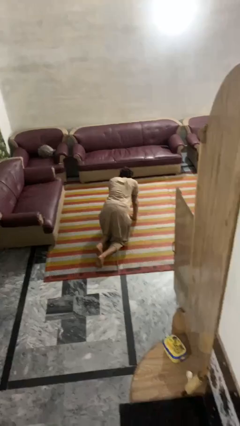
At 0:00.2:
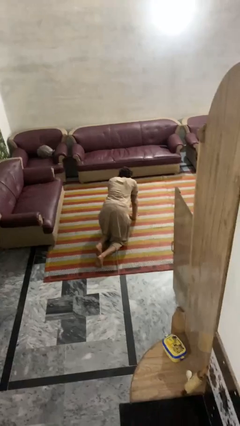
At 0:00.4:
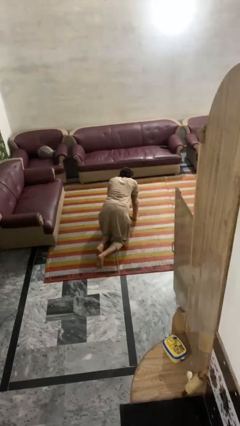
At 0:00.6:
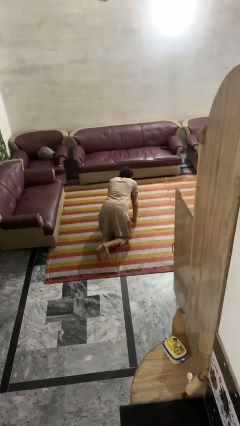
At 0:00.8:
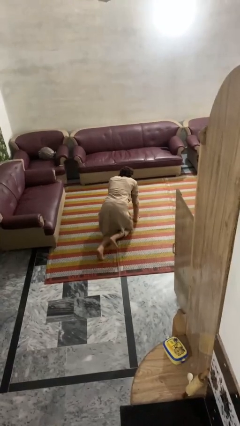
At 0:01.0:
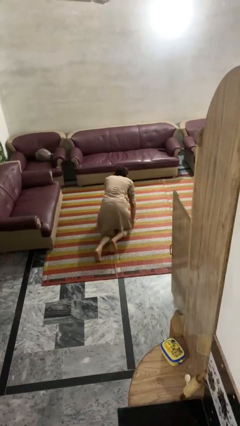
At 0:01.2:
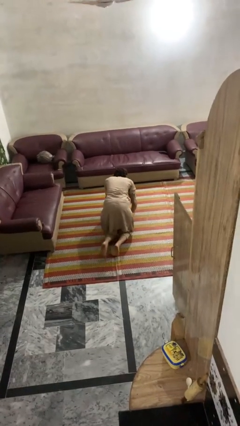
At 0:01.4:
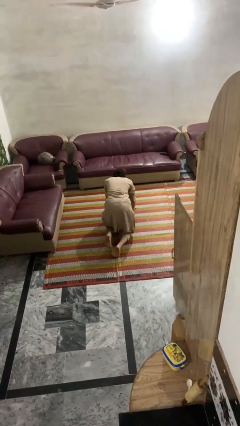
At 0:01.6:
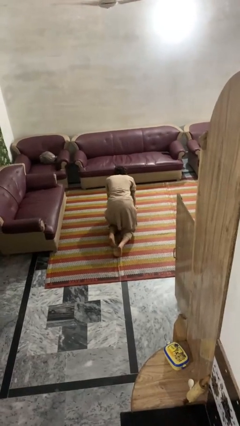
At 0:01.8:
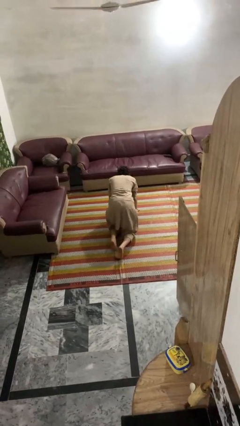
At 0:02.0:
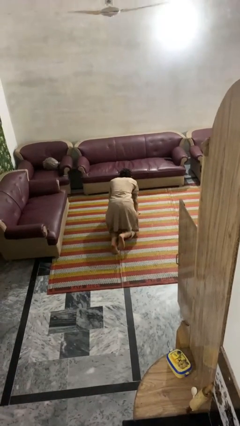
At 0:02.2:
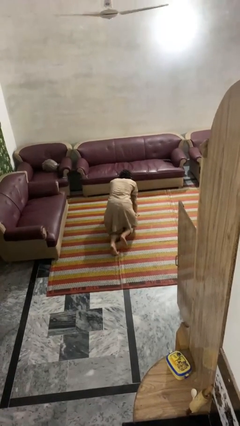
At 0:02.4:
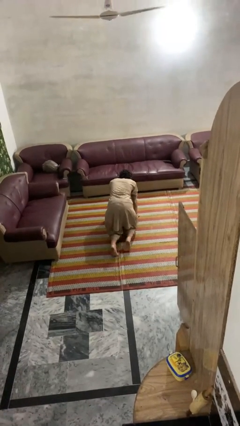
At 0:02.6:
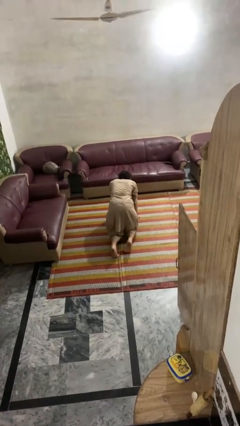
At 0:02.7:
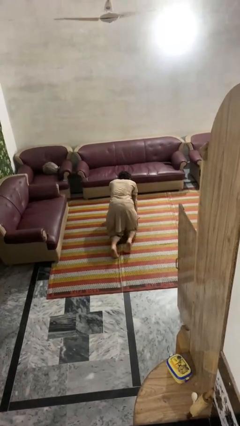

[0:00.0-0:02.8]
person crawls

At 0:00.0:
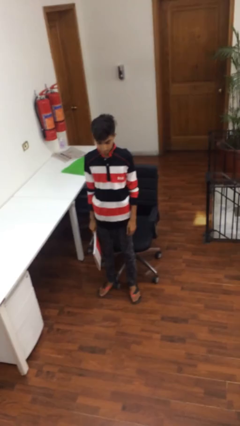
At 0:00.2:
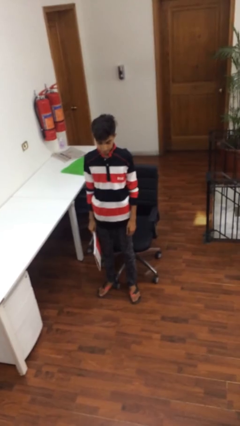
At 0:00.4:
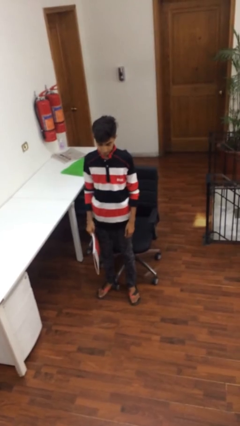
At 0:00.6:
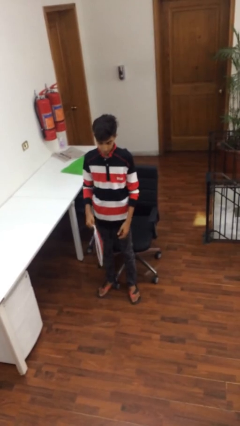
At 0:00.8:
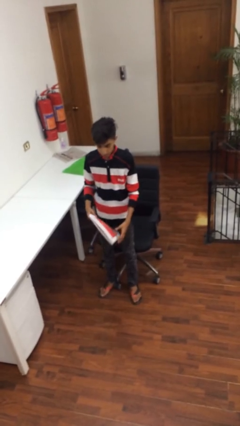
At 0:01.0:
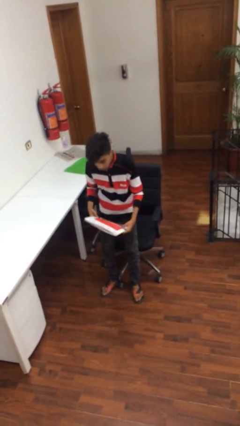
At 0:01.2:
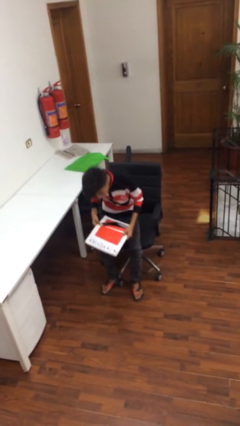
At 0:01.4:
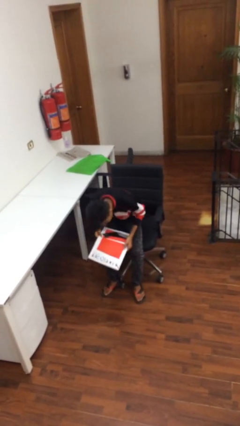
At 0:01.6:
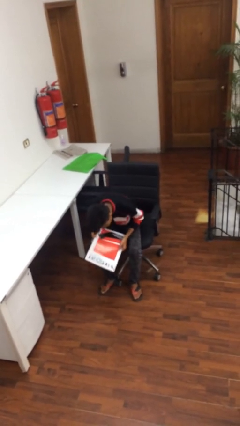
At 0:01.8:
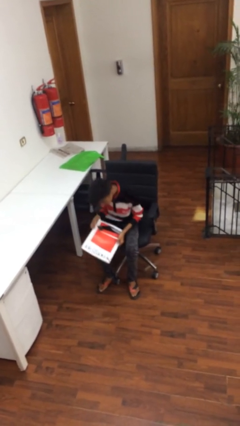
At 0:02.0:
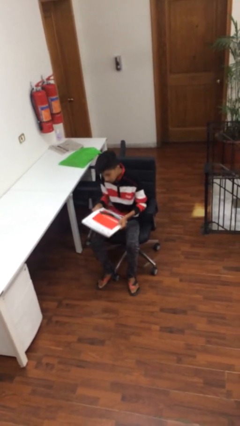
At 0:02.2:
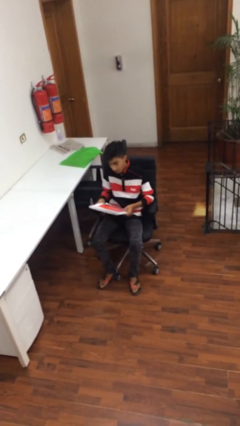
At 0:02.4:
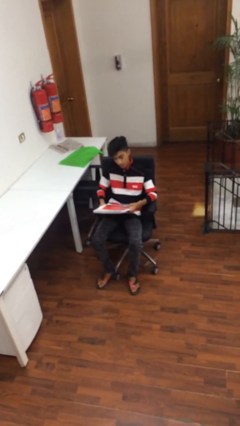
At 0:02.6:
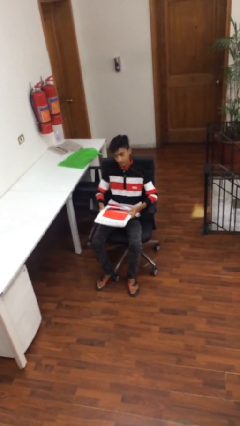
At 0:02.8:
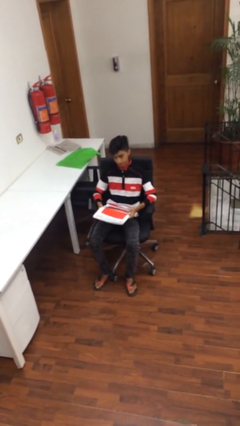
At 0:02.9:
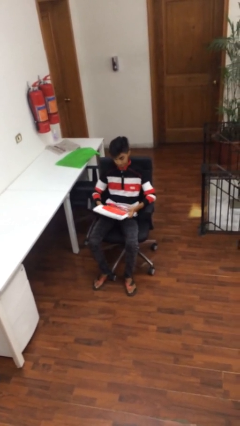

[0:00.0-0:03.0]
person sits down

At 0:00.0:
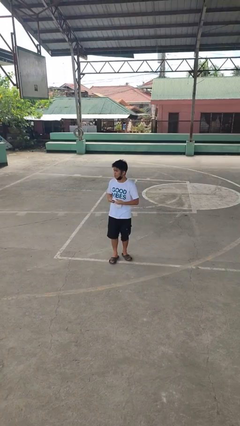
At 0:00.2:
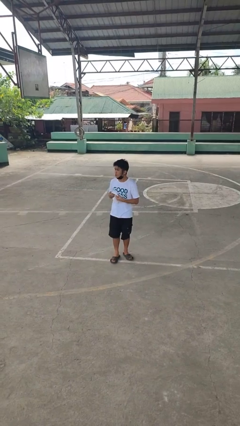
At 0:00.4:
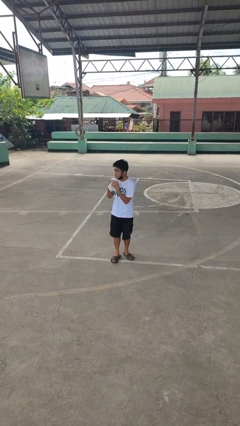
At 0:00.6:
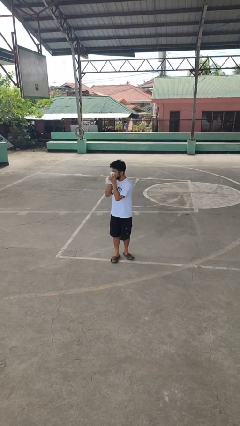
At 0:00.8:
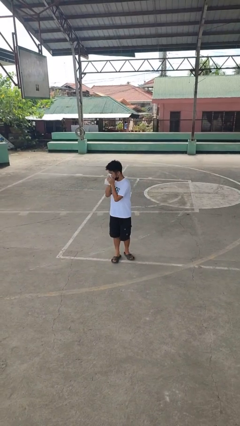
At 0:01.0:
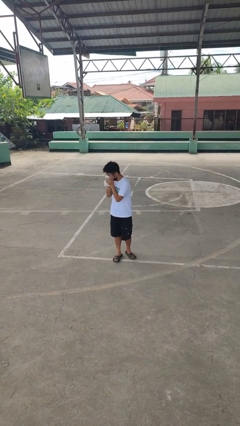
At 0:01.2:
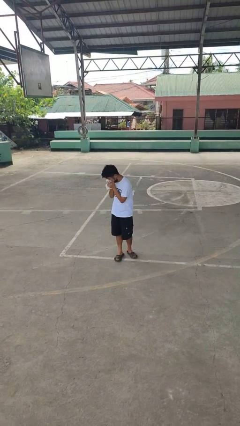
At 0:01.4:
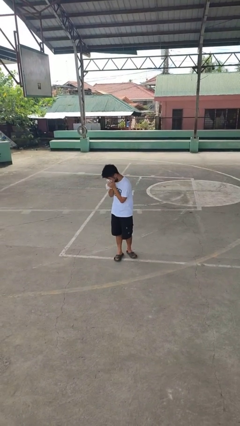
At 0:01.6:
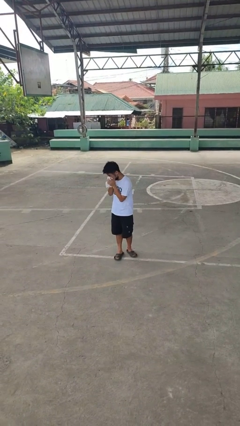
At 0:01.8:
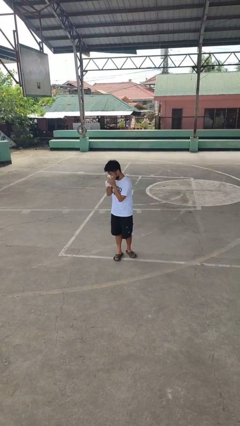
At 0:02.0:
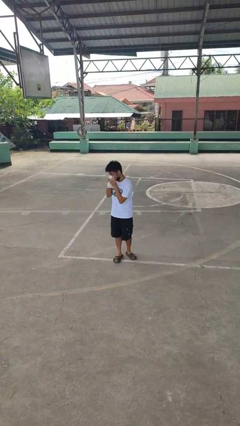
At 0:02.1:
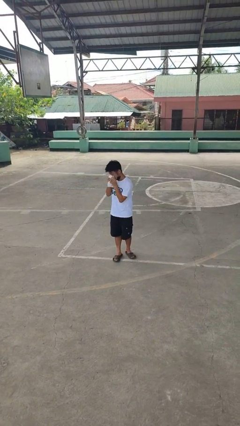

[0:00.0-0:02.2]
person blows nose

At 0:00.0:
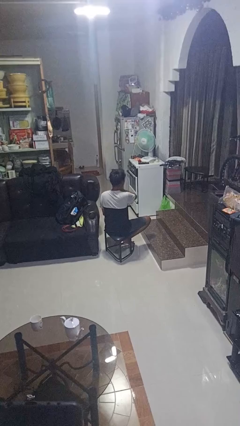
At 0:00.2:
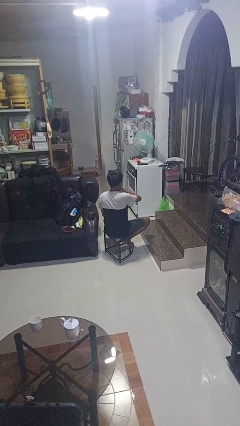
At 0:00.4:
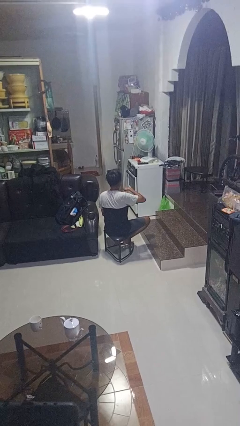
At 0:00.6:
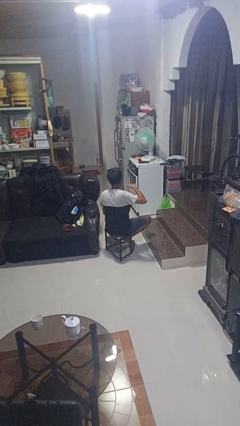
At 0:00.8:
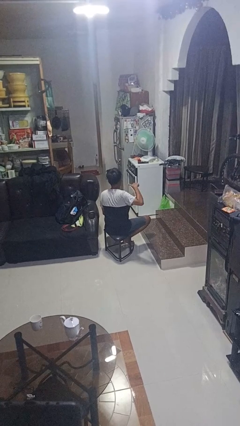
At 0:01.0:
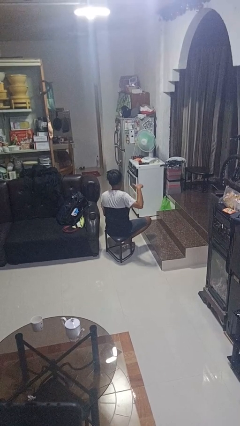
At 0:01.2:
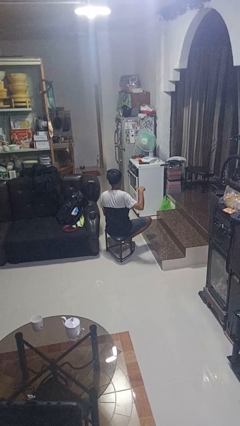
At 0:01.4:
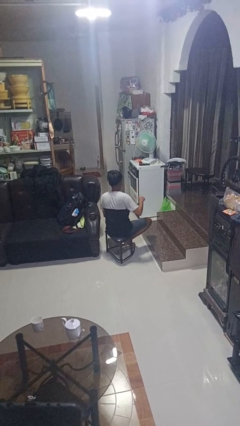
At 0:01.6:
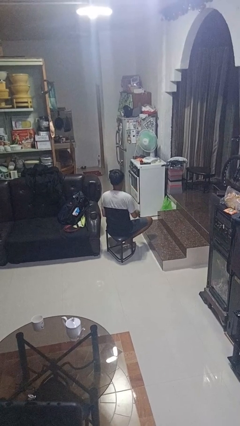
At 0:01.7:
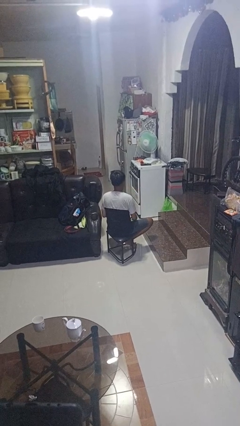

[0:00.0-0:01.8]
person gestures cut

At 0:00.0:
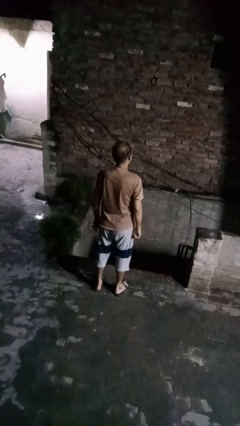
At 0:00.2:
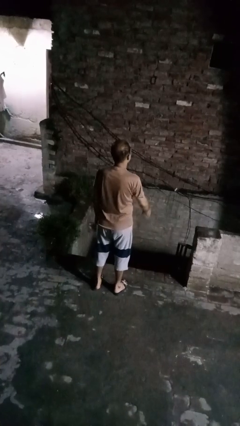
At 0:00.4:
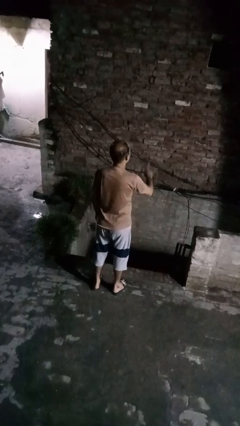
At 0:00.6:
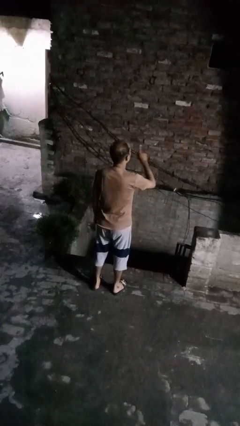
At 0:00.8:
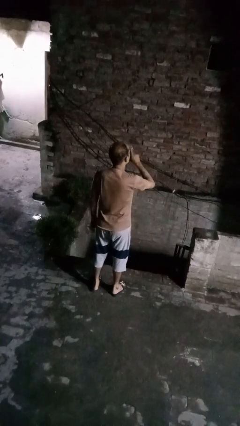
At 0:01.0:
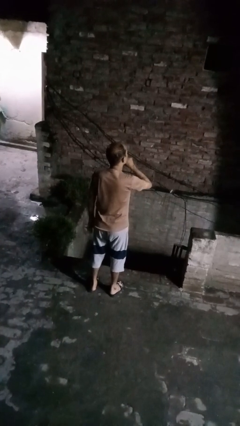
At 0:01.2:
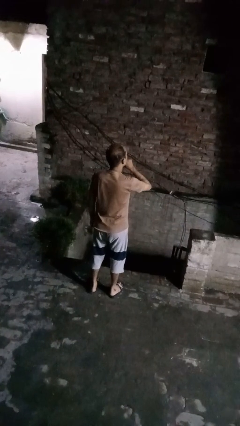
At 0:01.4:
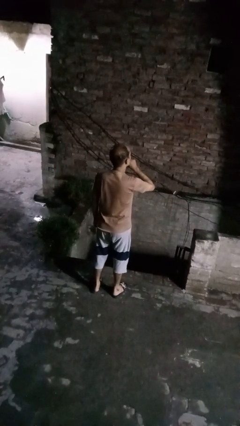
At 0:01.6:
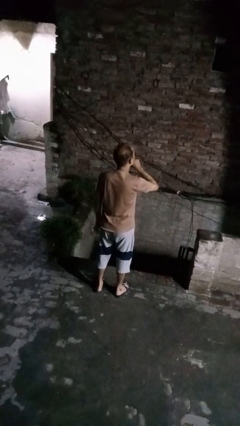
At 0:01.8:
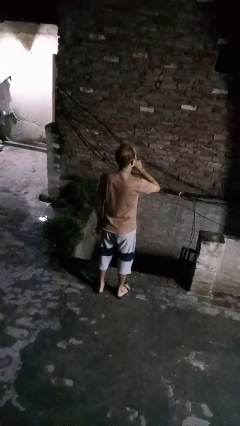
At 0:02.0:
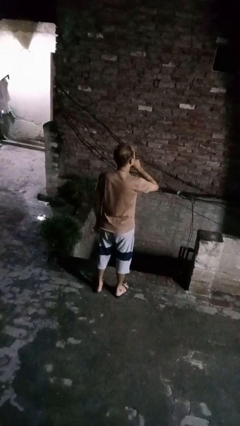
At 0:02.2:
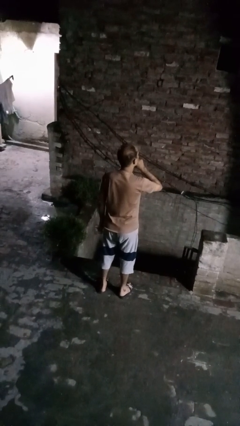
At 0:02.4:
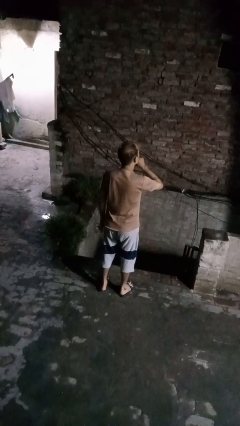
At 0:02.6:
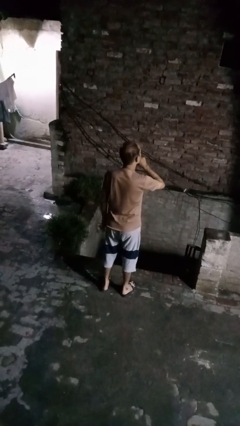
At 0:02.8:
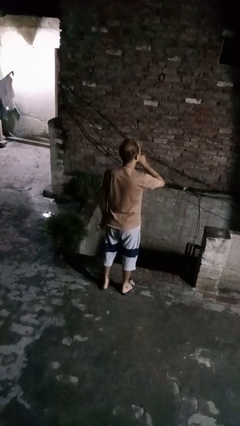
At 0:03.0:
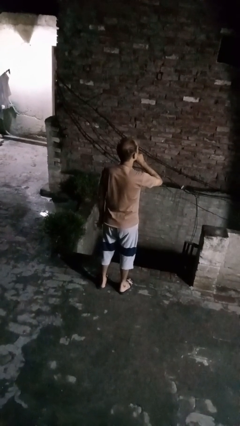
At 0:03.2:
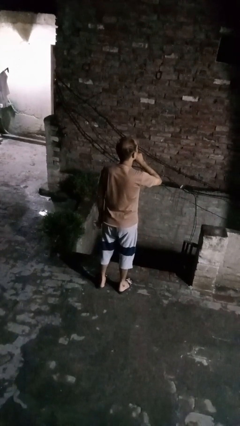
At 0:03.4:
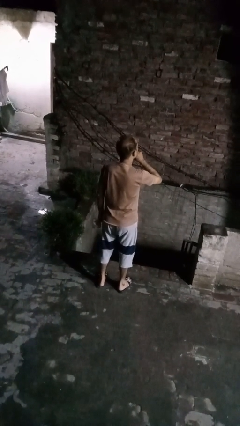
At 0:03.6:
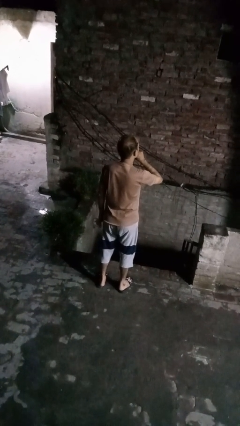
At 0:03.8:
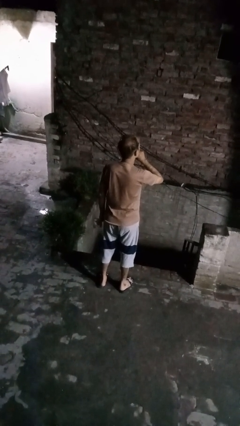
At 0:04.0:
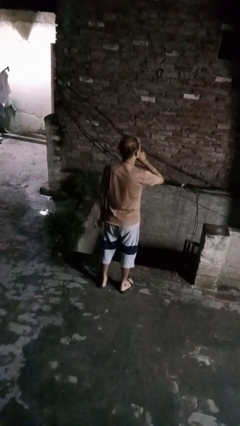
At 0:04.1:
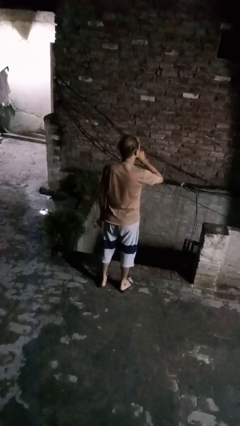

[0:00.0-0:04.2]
person gestures be quiet

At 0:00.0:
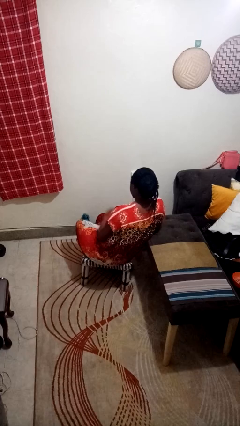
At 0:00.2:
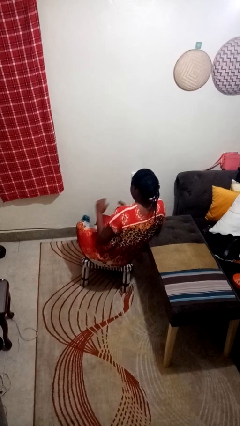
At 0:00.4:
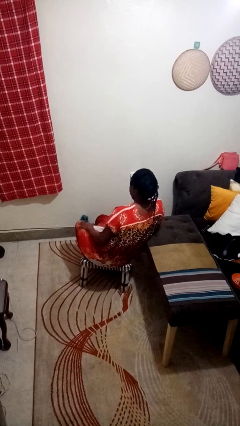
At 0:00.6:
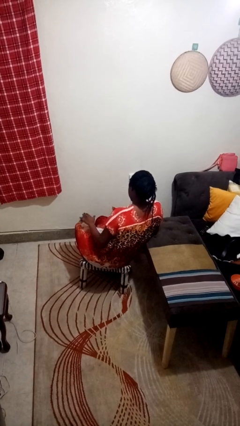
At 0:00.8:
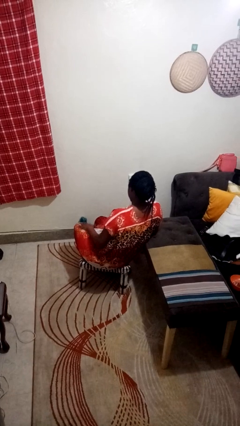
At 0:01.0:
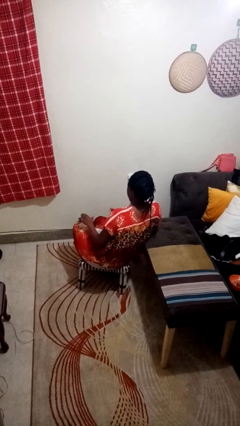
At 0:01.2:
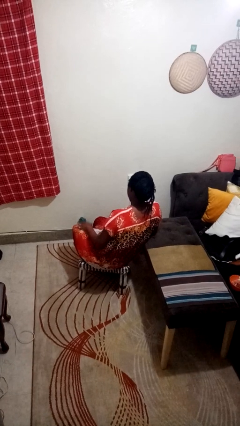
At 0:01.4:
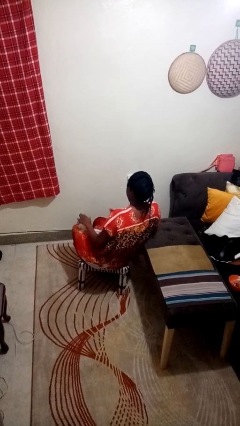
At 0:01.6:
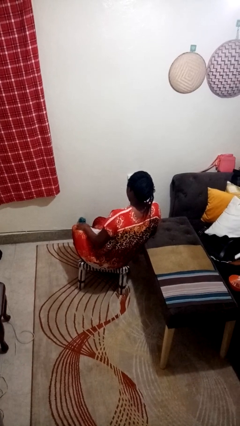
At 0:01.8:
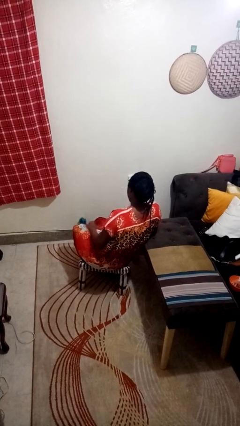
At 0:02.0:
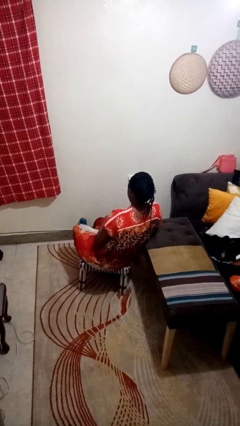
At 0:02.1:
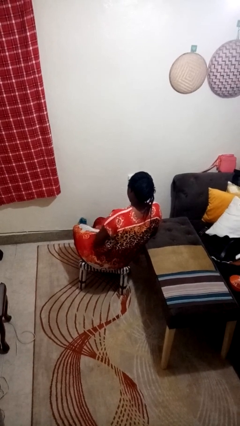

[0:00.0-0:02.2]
person slaps hands on thighs

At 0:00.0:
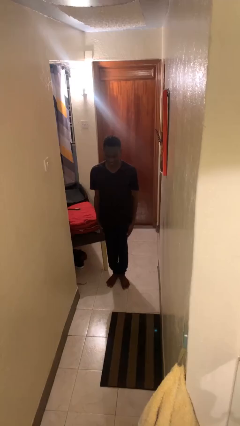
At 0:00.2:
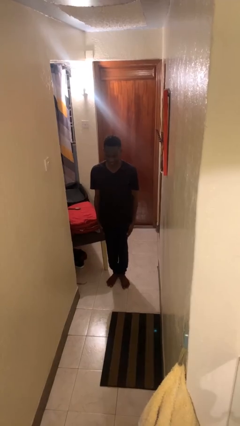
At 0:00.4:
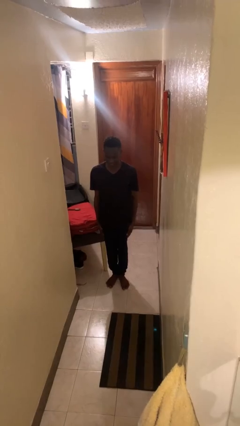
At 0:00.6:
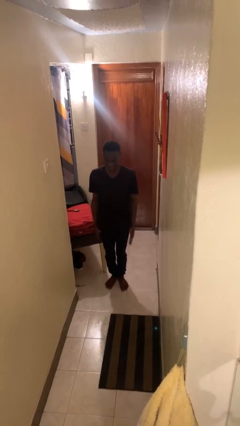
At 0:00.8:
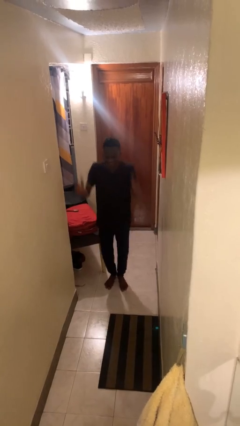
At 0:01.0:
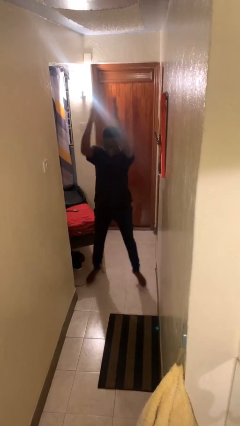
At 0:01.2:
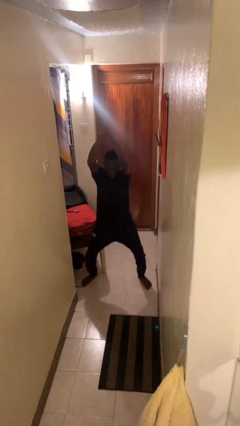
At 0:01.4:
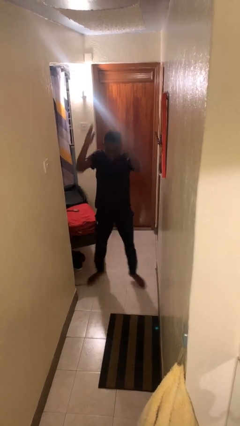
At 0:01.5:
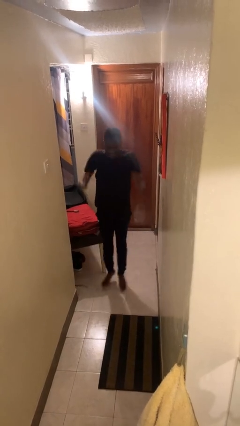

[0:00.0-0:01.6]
person exercises with jumping jacks
